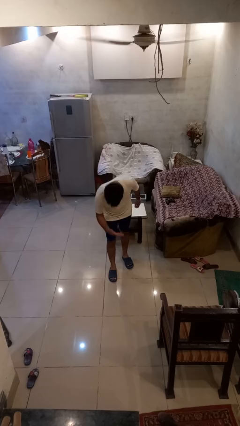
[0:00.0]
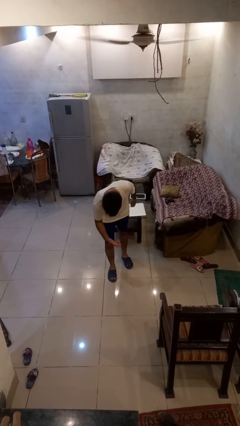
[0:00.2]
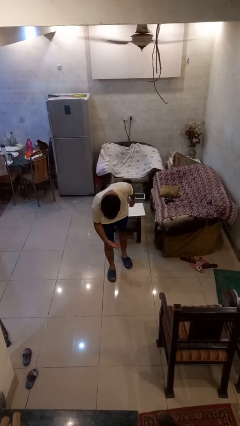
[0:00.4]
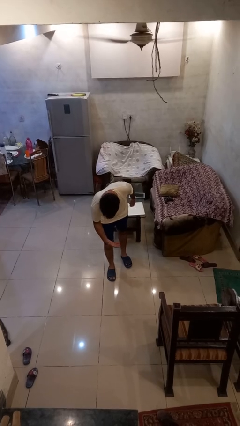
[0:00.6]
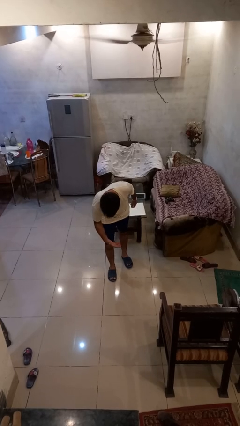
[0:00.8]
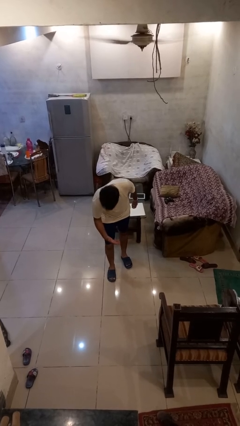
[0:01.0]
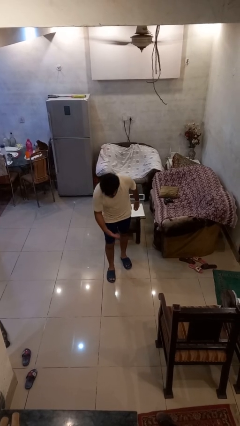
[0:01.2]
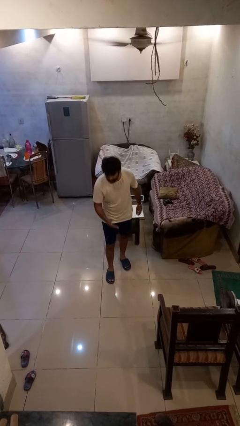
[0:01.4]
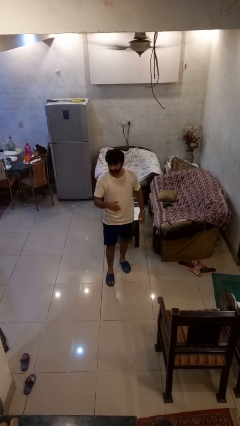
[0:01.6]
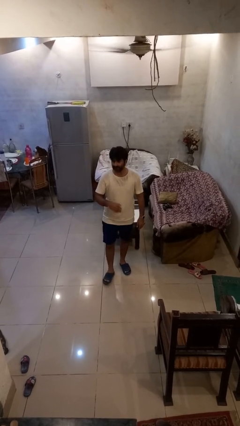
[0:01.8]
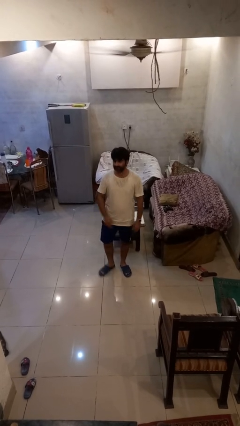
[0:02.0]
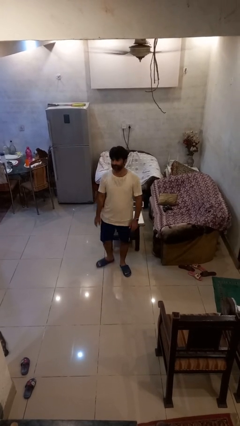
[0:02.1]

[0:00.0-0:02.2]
person bows

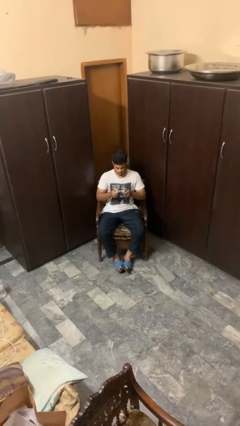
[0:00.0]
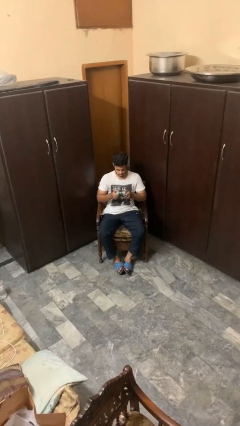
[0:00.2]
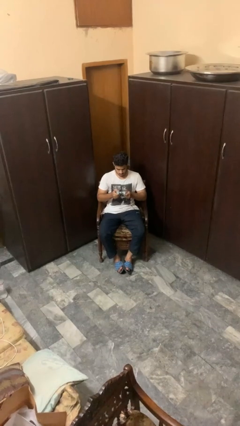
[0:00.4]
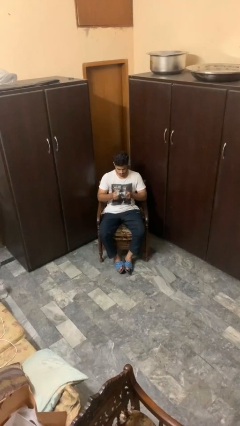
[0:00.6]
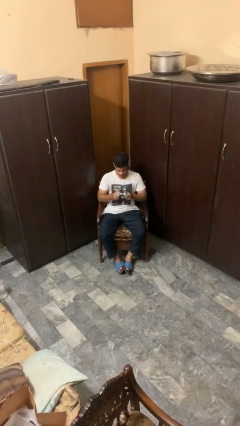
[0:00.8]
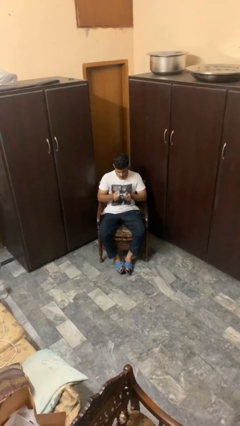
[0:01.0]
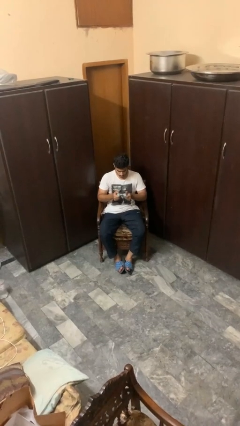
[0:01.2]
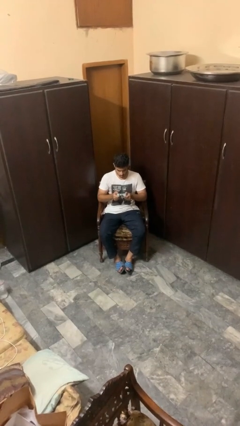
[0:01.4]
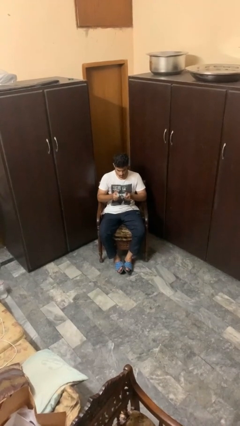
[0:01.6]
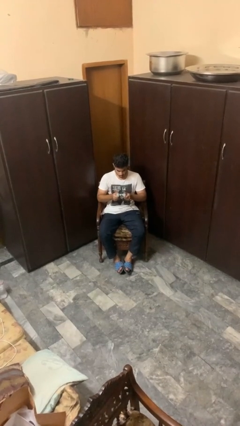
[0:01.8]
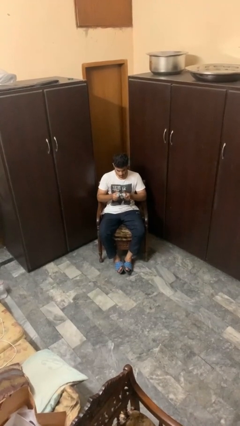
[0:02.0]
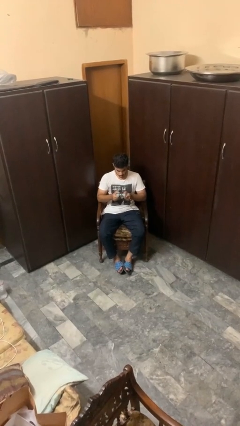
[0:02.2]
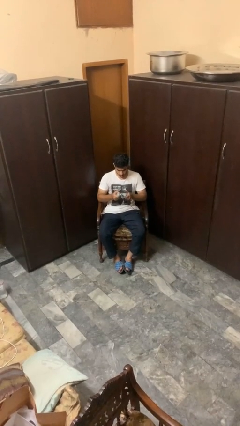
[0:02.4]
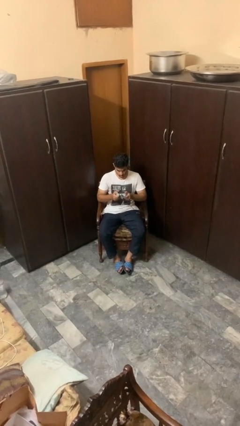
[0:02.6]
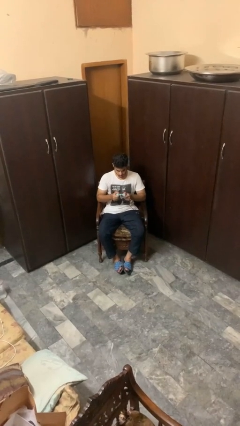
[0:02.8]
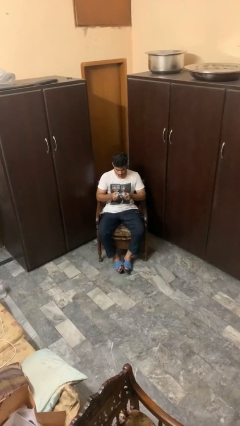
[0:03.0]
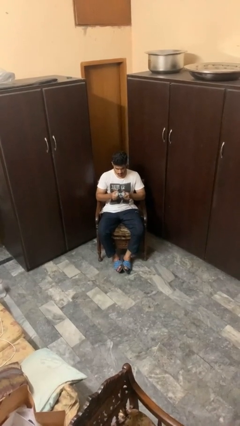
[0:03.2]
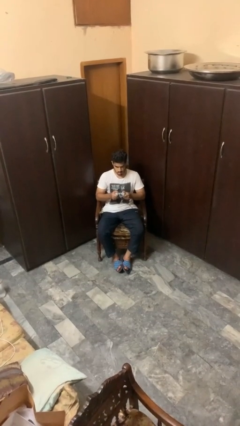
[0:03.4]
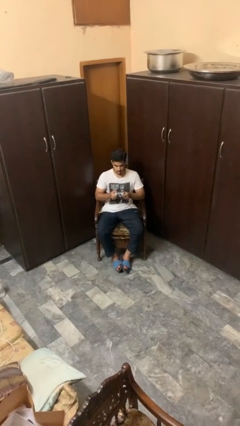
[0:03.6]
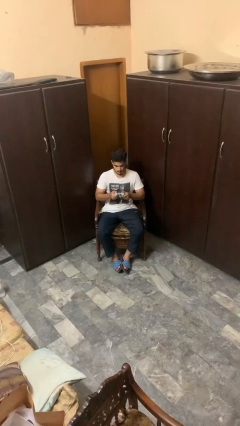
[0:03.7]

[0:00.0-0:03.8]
person interacts with handheld game

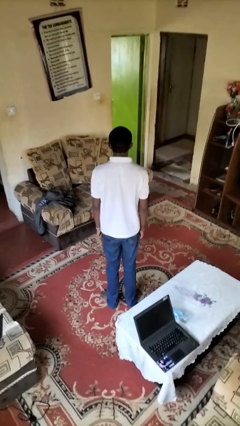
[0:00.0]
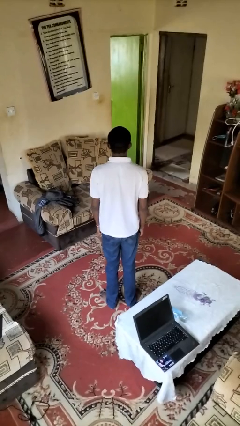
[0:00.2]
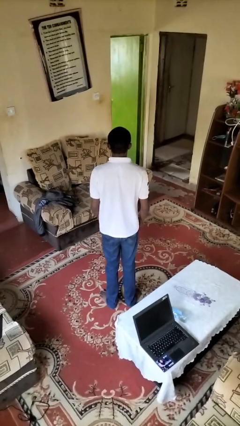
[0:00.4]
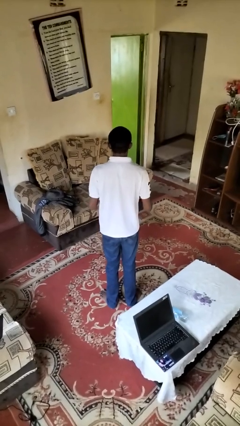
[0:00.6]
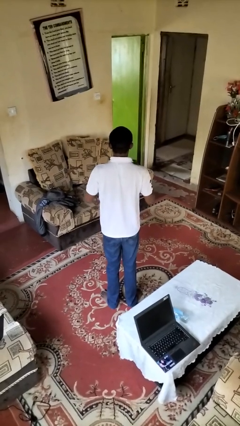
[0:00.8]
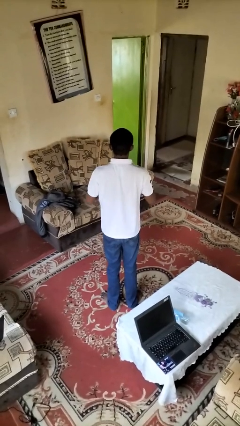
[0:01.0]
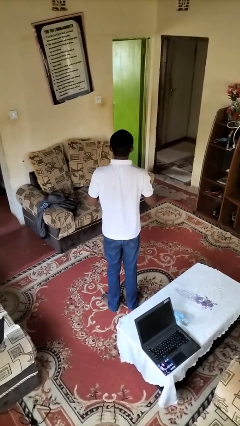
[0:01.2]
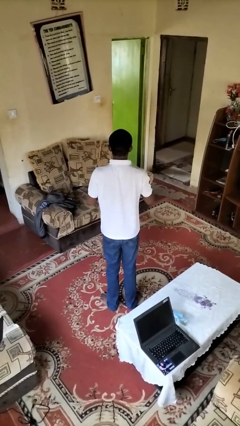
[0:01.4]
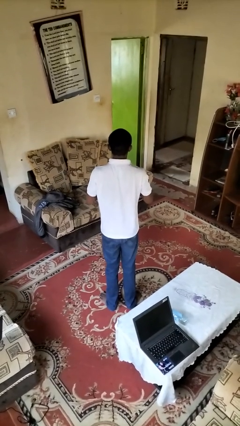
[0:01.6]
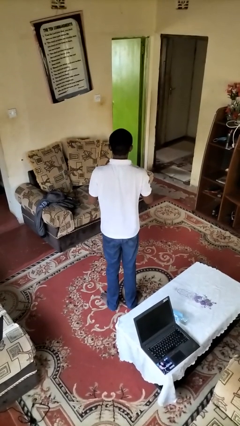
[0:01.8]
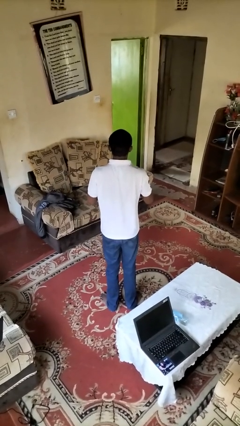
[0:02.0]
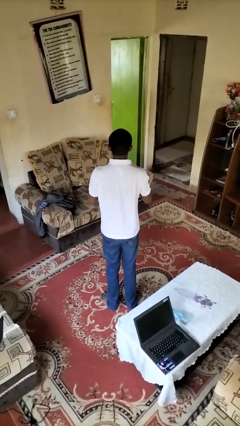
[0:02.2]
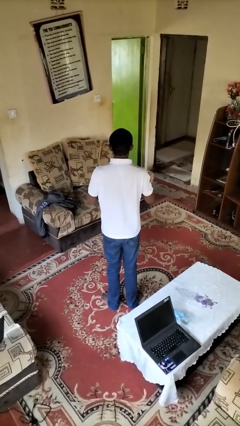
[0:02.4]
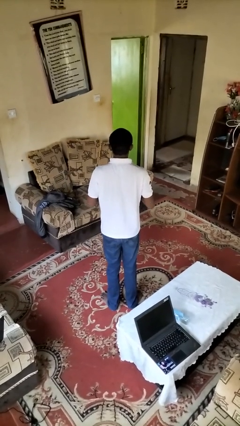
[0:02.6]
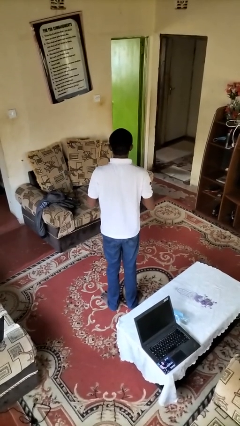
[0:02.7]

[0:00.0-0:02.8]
person drums on chest

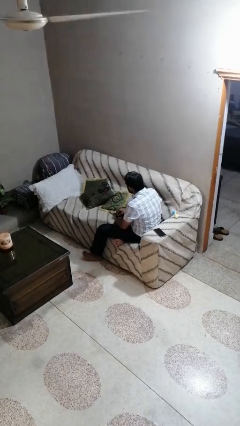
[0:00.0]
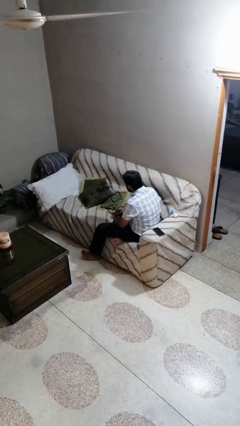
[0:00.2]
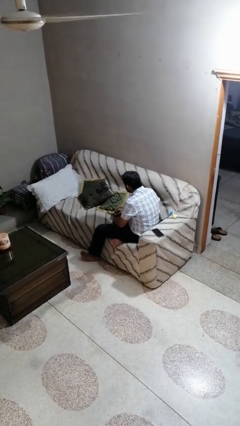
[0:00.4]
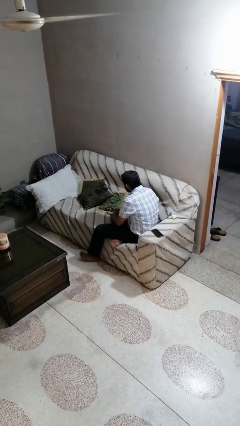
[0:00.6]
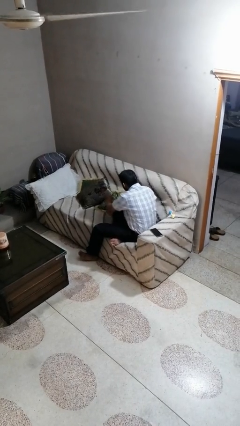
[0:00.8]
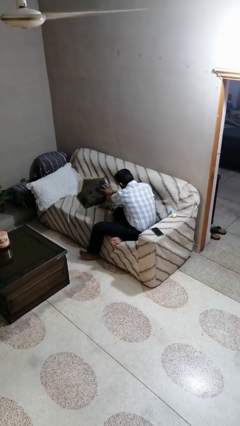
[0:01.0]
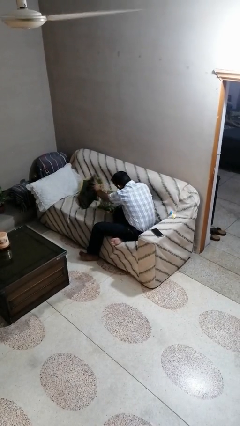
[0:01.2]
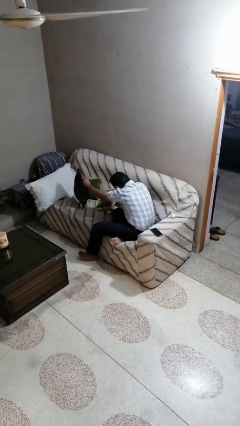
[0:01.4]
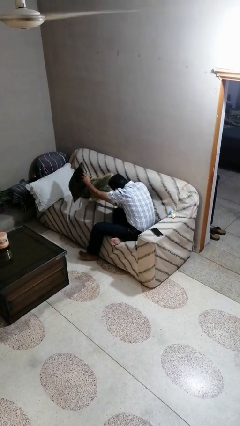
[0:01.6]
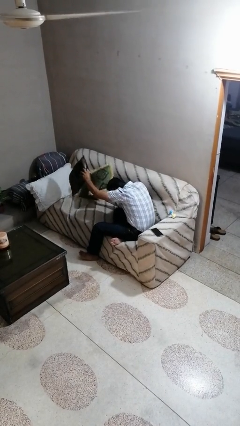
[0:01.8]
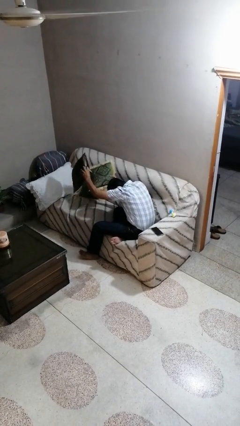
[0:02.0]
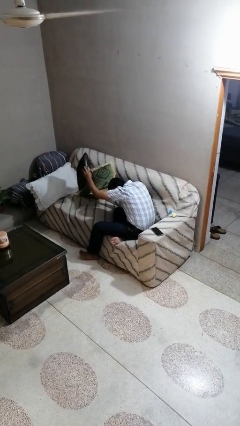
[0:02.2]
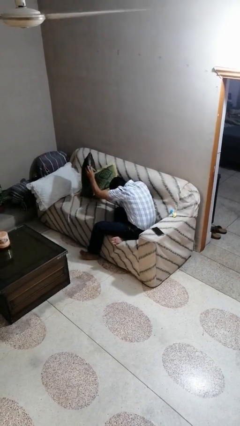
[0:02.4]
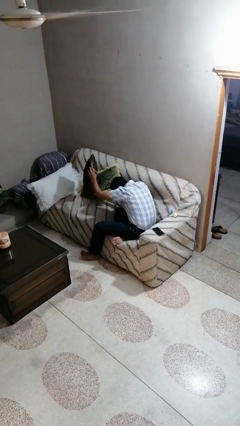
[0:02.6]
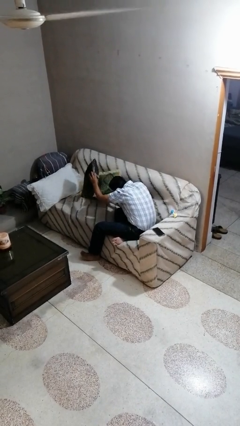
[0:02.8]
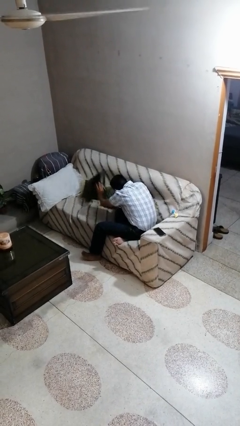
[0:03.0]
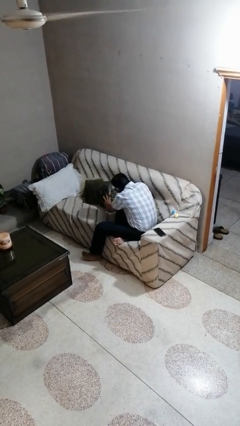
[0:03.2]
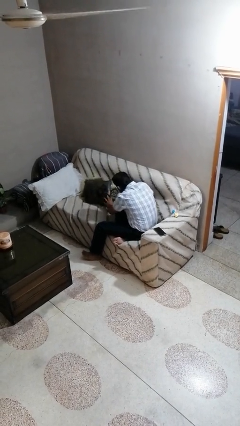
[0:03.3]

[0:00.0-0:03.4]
person searches in couch

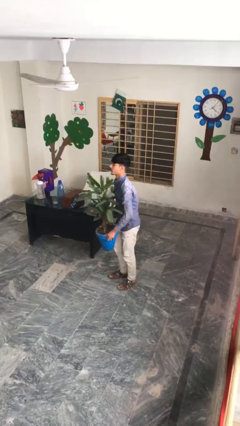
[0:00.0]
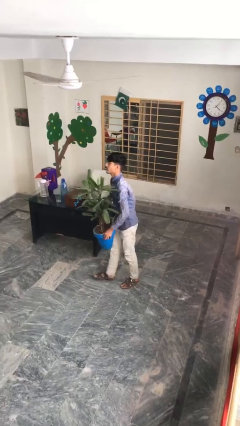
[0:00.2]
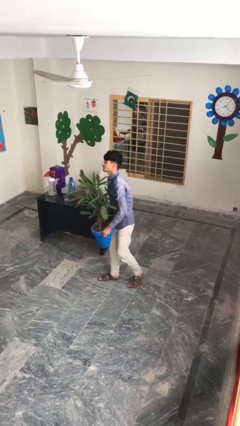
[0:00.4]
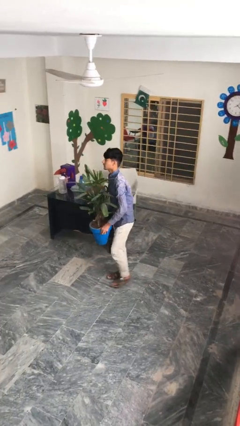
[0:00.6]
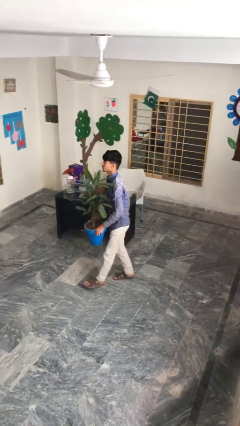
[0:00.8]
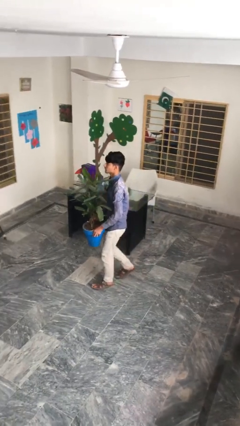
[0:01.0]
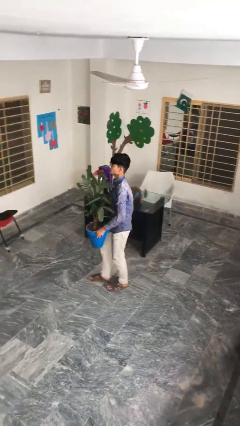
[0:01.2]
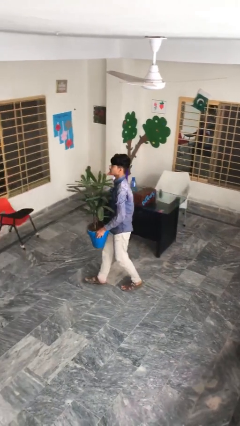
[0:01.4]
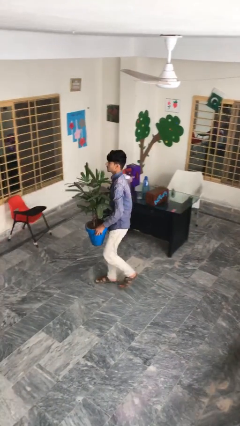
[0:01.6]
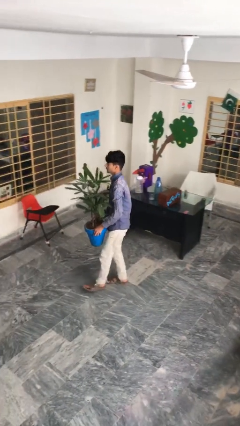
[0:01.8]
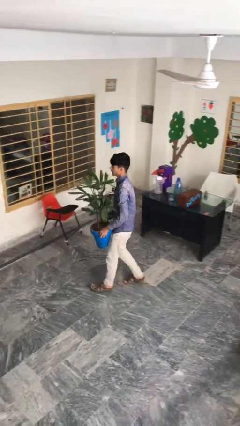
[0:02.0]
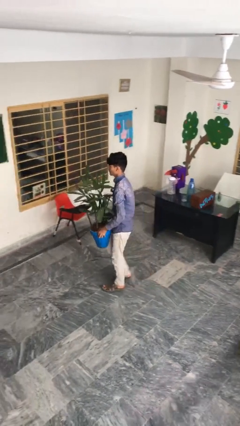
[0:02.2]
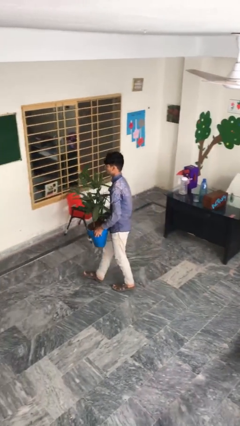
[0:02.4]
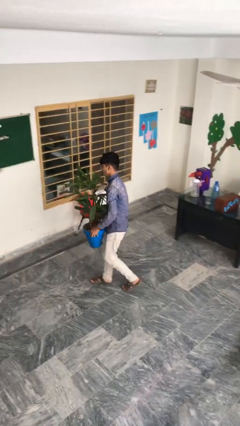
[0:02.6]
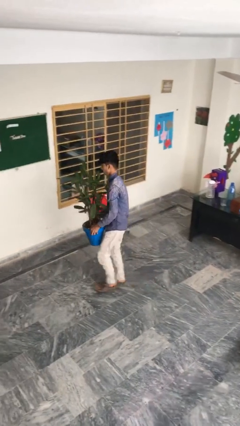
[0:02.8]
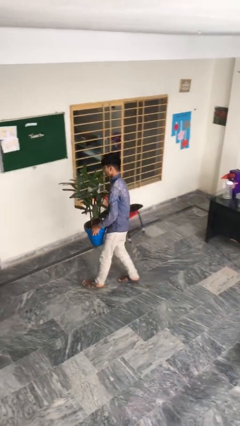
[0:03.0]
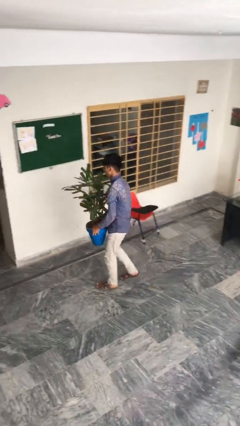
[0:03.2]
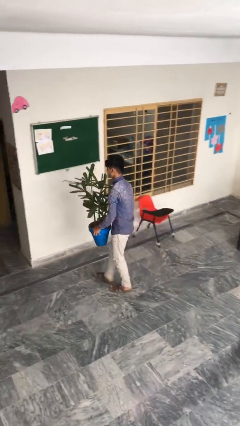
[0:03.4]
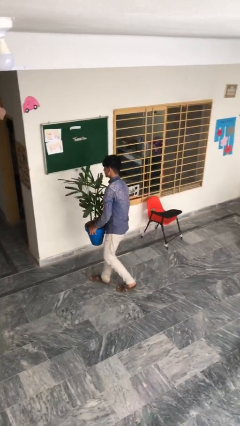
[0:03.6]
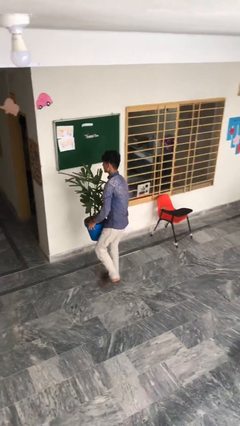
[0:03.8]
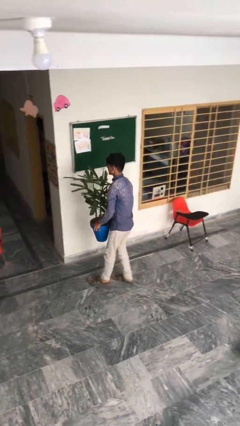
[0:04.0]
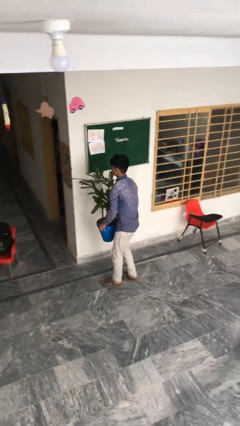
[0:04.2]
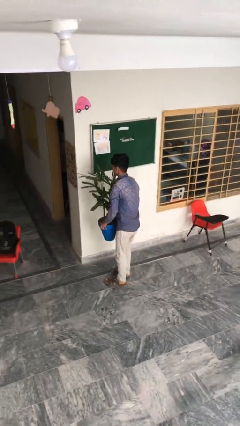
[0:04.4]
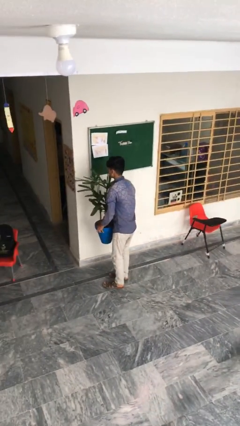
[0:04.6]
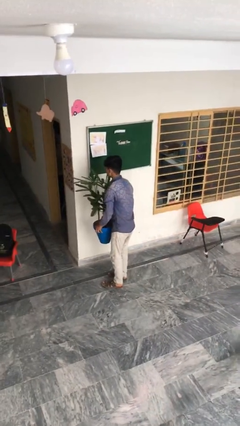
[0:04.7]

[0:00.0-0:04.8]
person carries heavy object

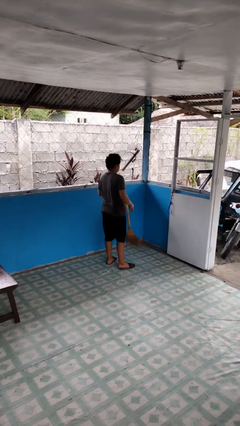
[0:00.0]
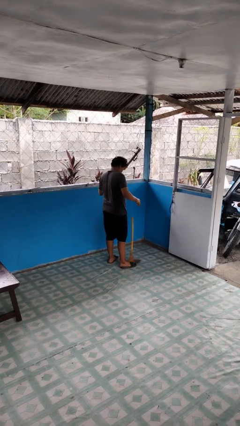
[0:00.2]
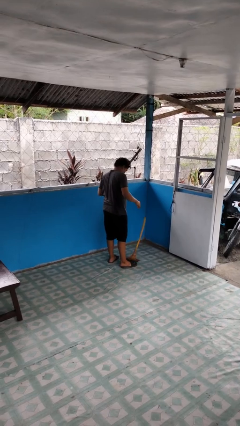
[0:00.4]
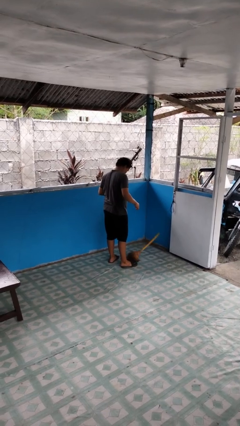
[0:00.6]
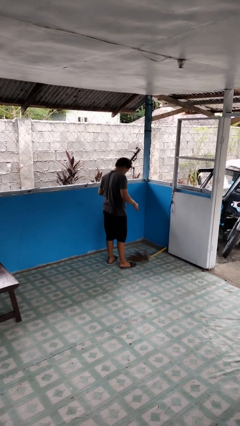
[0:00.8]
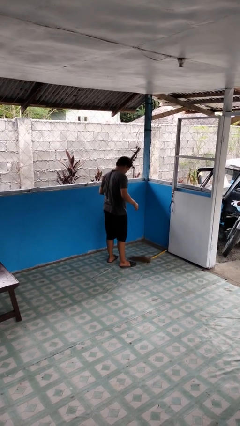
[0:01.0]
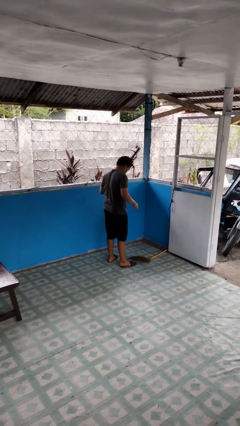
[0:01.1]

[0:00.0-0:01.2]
person drops object
